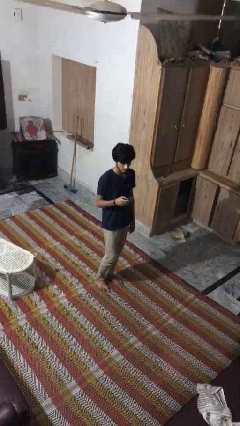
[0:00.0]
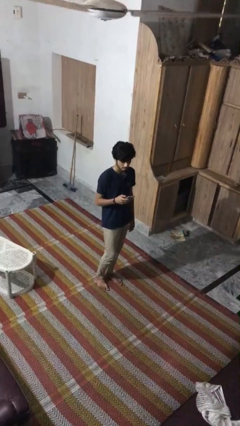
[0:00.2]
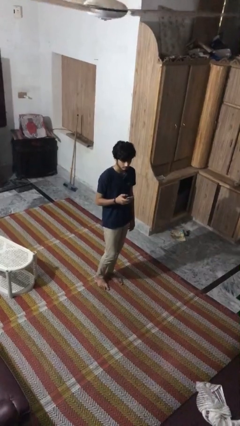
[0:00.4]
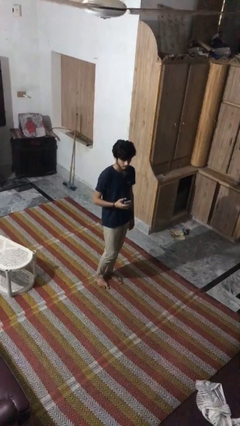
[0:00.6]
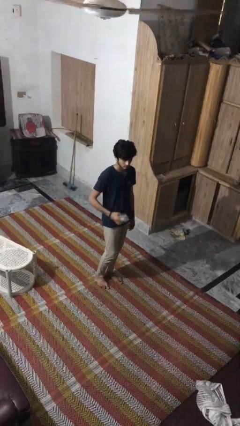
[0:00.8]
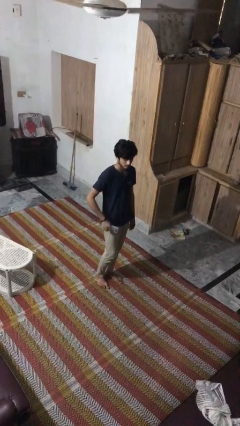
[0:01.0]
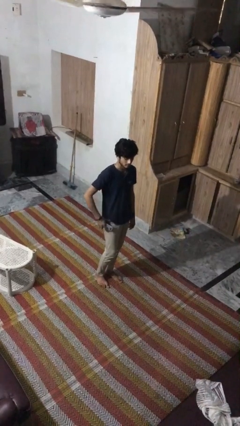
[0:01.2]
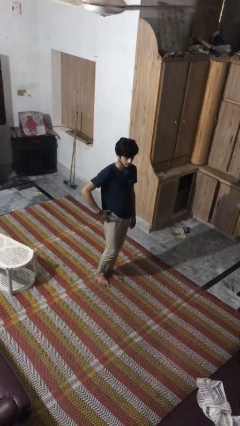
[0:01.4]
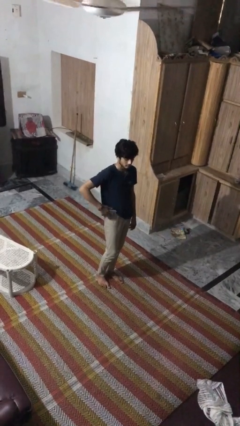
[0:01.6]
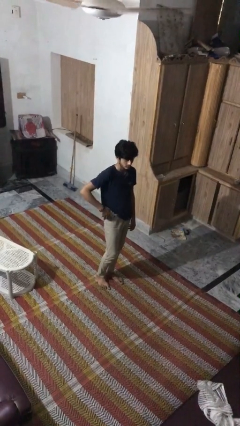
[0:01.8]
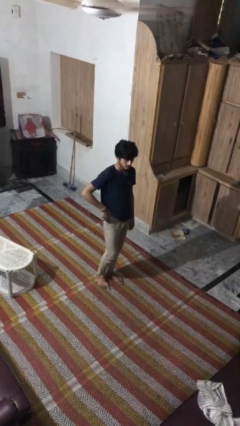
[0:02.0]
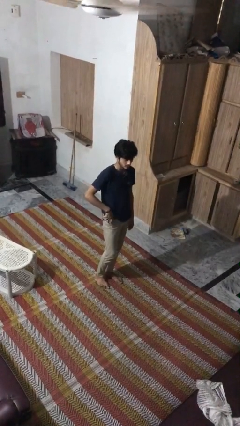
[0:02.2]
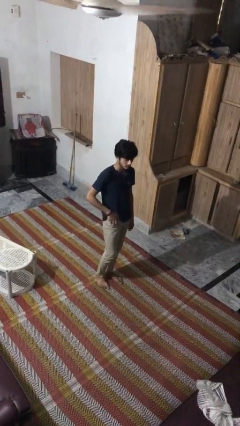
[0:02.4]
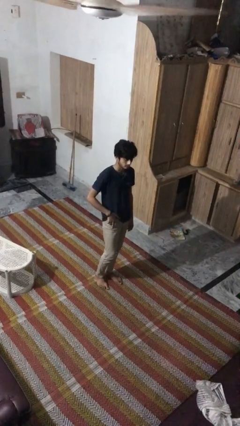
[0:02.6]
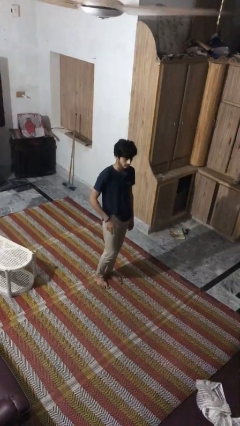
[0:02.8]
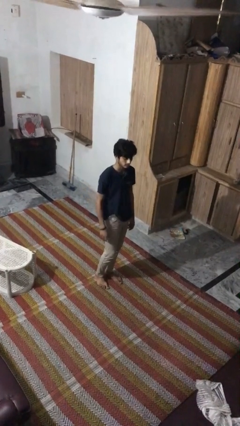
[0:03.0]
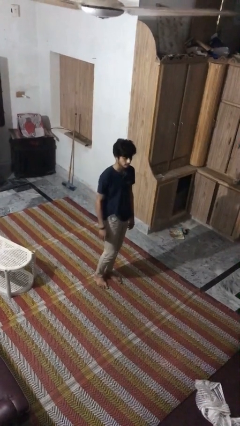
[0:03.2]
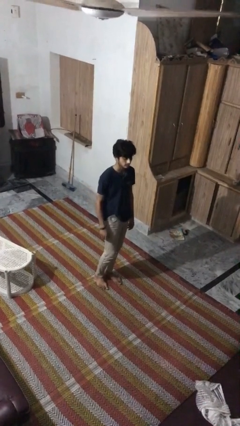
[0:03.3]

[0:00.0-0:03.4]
person puts phone into pocket

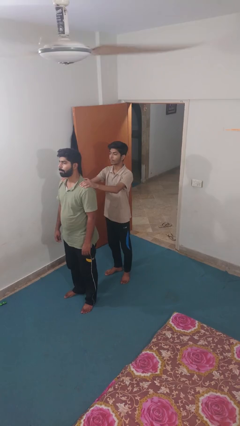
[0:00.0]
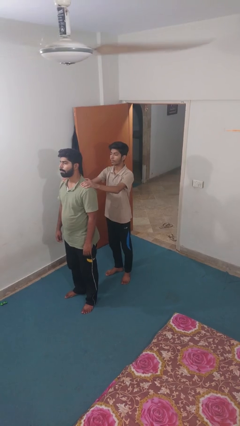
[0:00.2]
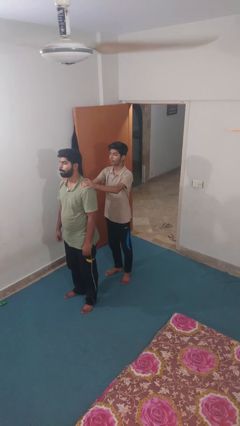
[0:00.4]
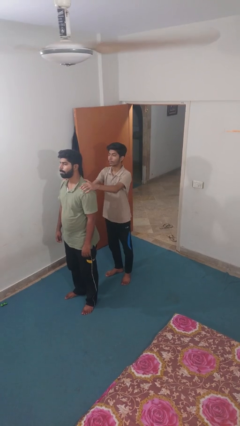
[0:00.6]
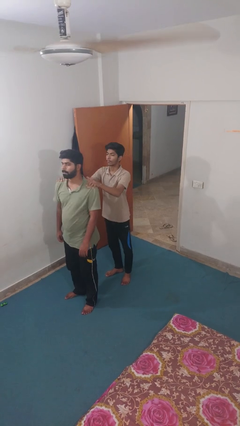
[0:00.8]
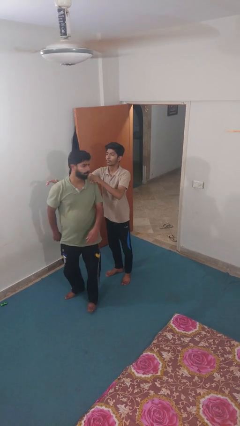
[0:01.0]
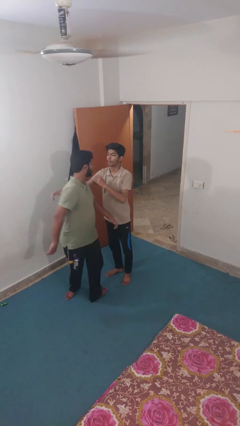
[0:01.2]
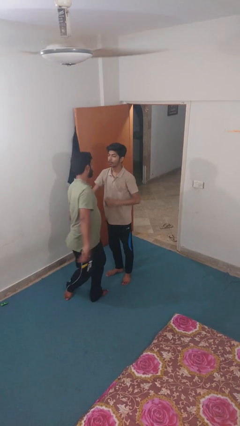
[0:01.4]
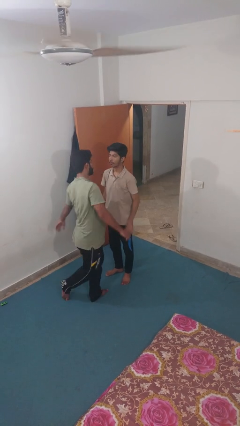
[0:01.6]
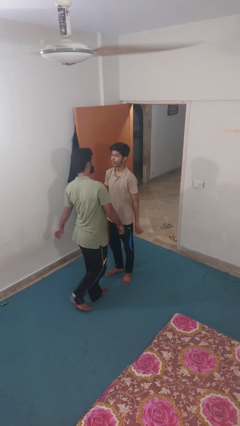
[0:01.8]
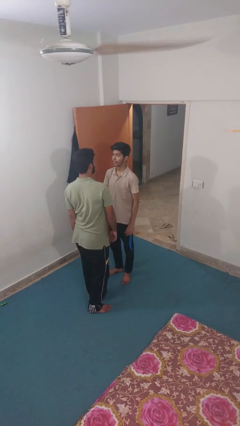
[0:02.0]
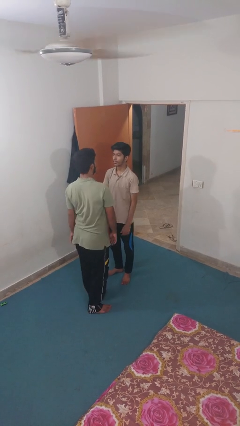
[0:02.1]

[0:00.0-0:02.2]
person spins person around

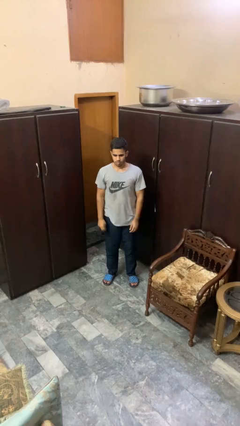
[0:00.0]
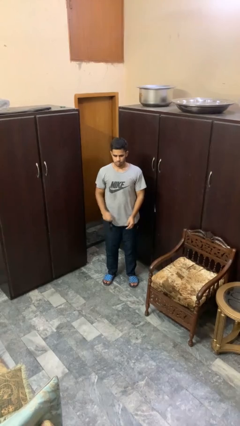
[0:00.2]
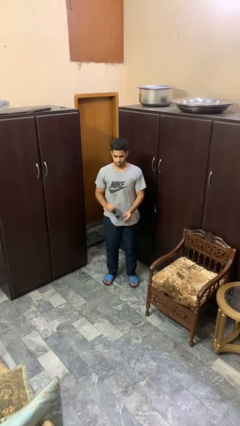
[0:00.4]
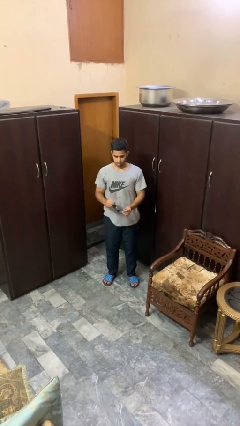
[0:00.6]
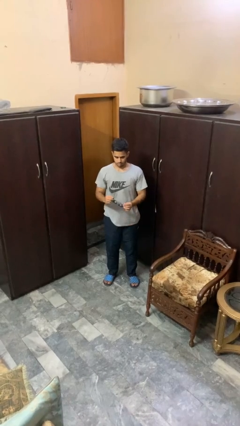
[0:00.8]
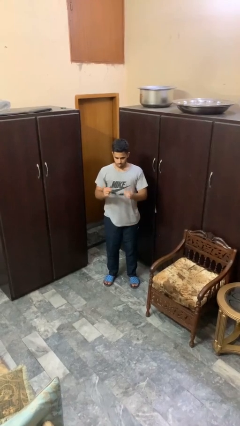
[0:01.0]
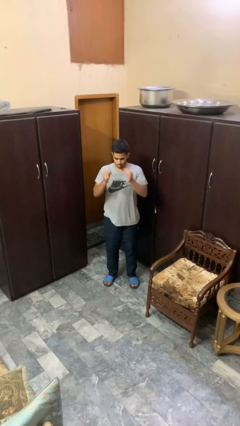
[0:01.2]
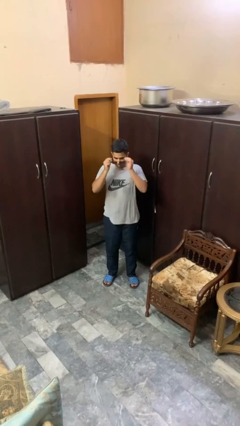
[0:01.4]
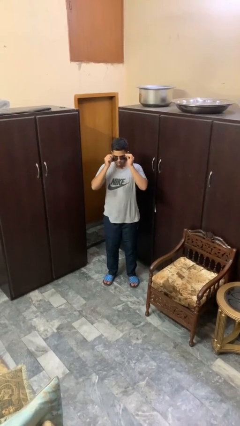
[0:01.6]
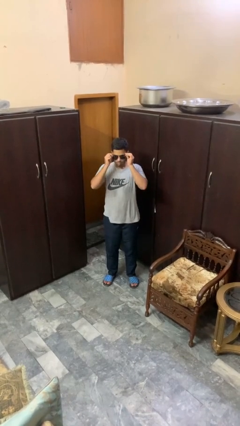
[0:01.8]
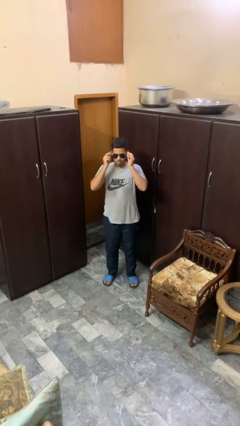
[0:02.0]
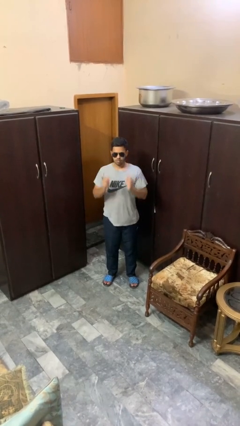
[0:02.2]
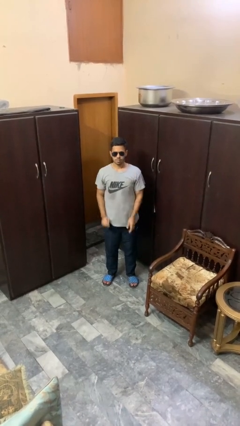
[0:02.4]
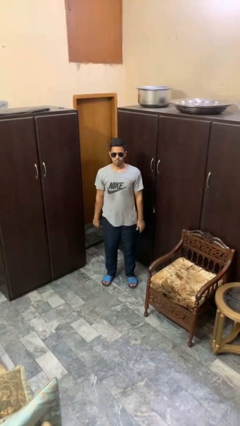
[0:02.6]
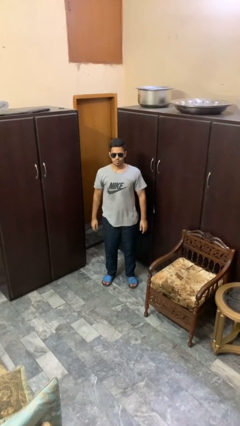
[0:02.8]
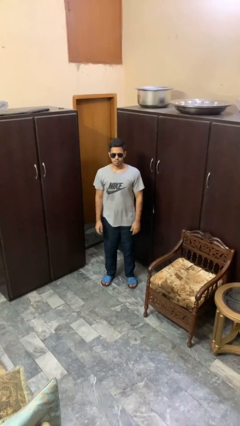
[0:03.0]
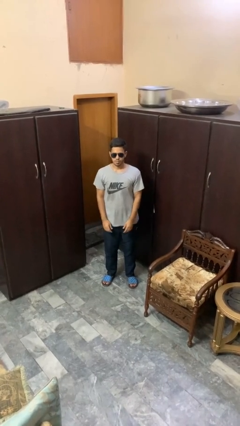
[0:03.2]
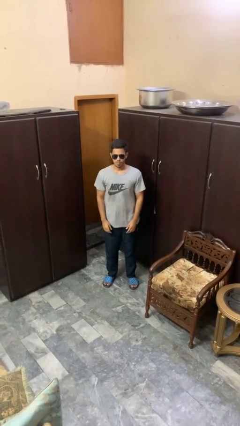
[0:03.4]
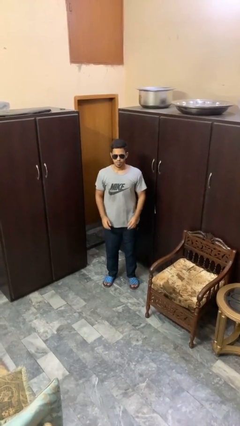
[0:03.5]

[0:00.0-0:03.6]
person puts on sunglasses

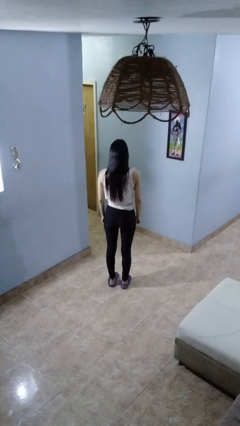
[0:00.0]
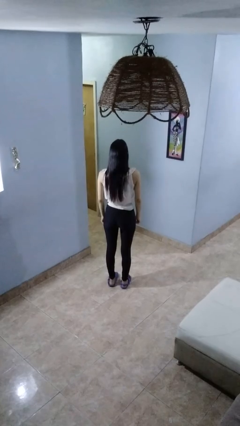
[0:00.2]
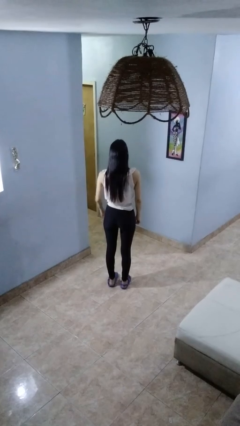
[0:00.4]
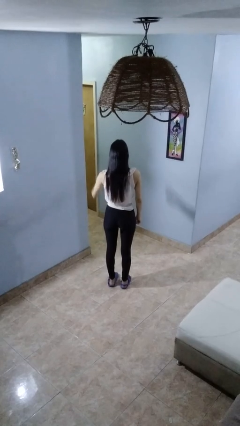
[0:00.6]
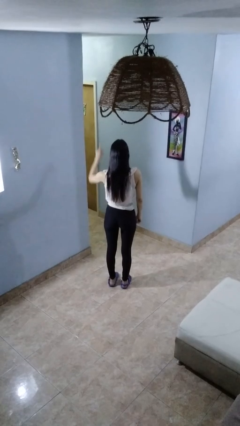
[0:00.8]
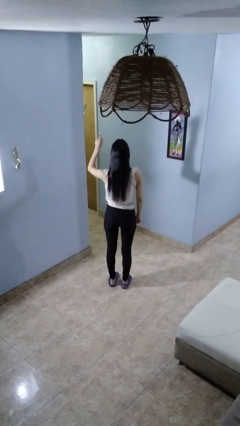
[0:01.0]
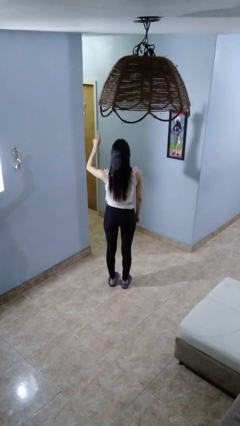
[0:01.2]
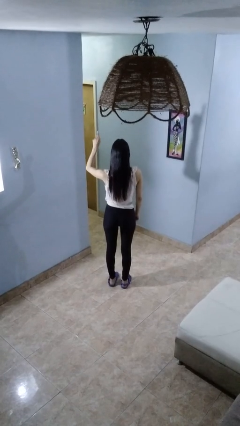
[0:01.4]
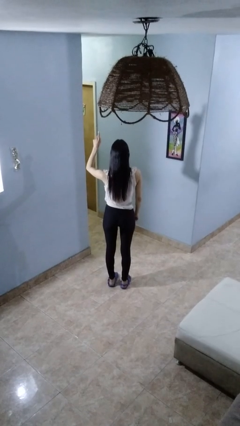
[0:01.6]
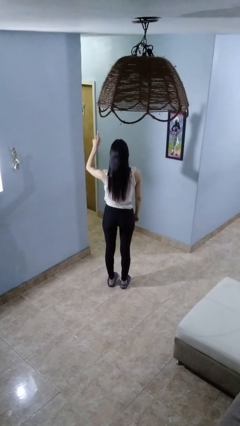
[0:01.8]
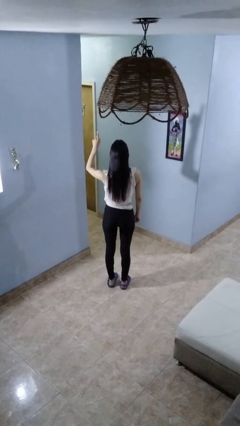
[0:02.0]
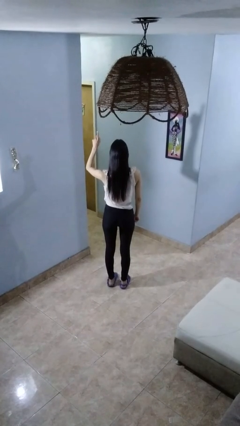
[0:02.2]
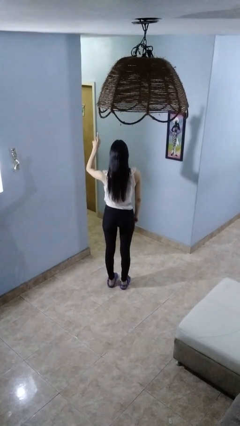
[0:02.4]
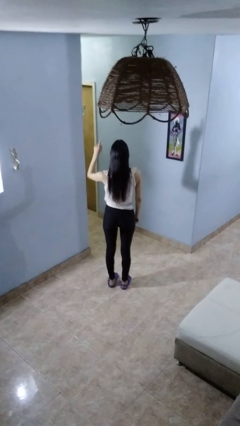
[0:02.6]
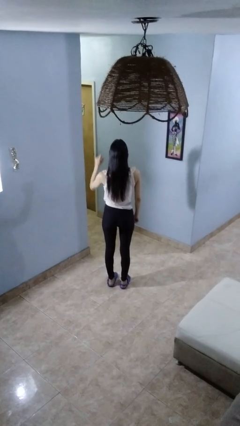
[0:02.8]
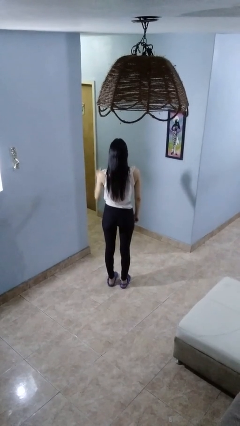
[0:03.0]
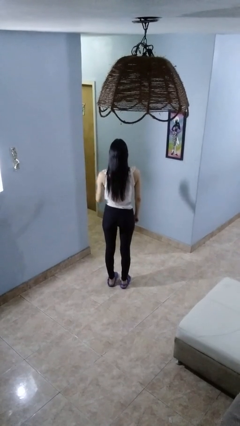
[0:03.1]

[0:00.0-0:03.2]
person gestures number one

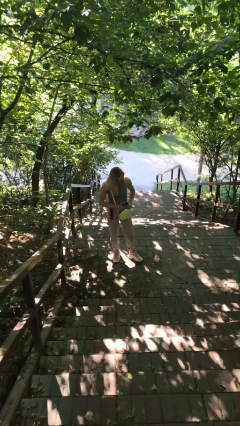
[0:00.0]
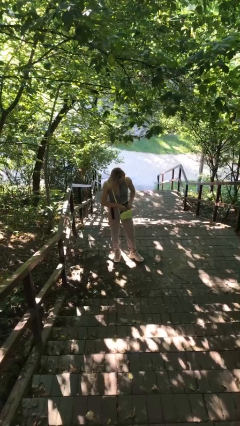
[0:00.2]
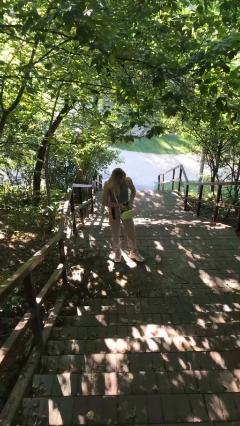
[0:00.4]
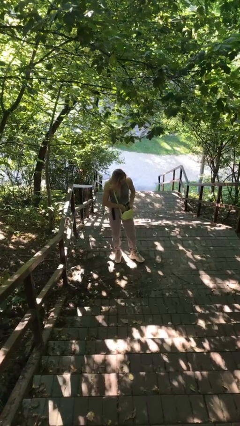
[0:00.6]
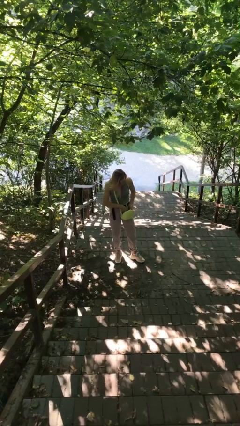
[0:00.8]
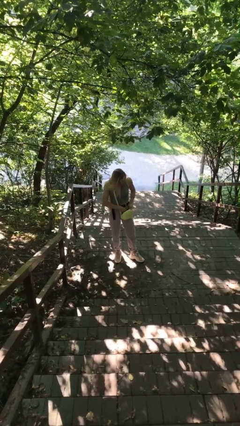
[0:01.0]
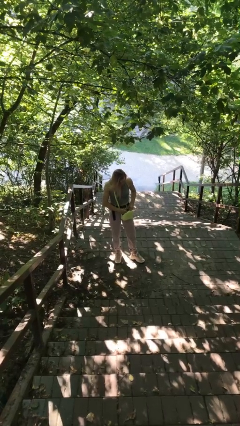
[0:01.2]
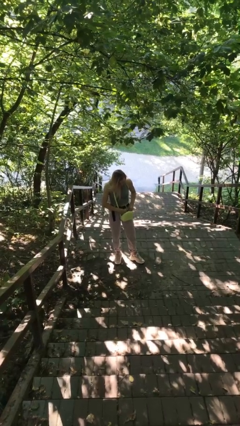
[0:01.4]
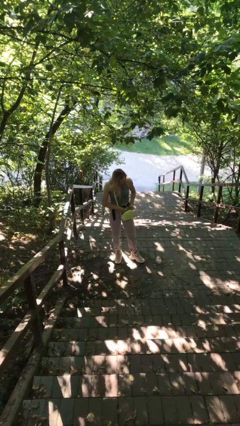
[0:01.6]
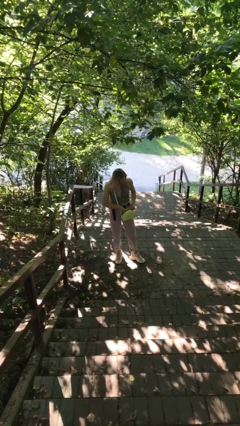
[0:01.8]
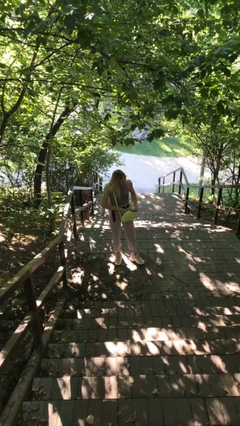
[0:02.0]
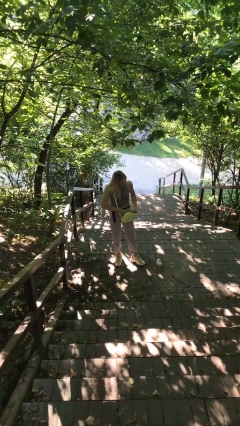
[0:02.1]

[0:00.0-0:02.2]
person searches in purse

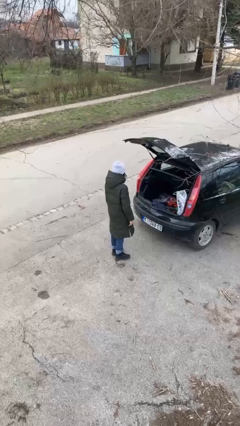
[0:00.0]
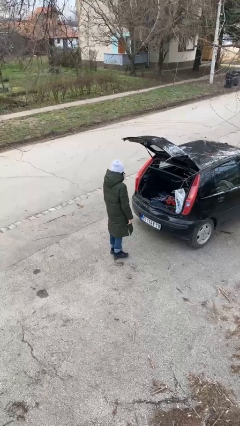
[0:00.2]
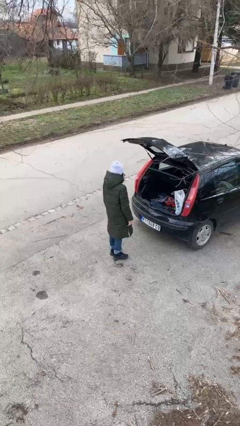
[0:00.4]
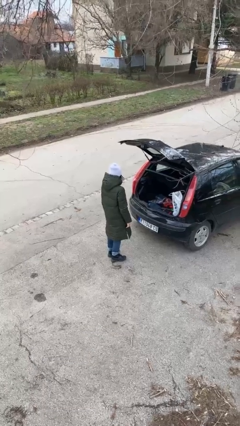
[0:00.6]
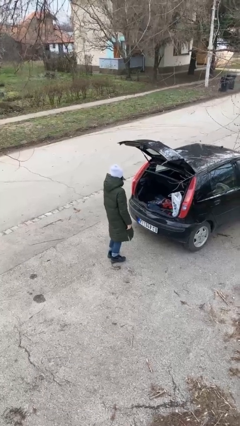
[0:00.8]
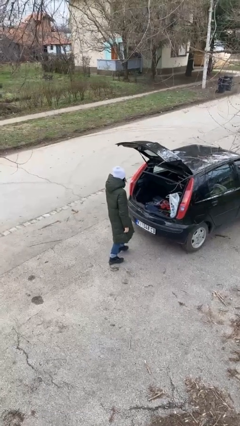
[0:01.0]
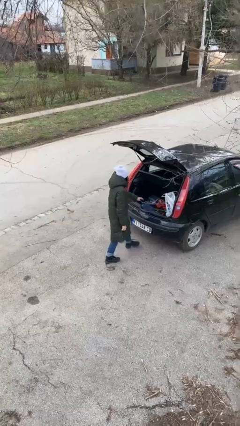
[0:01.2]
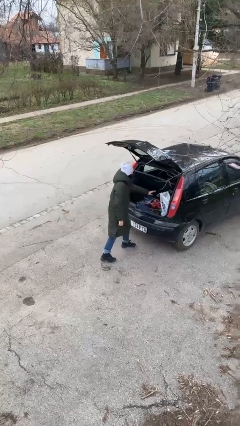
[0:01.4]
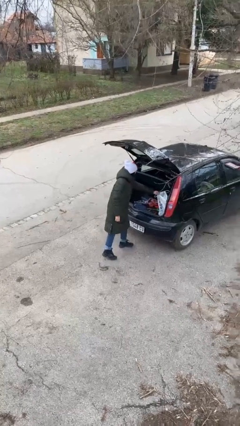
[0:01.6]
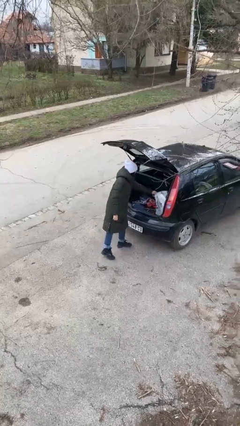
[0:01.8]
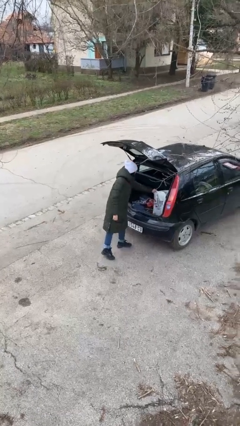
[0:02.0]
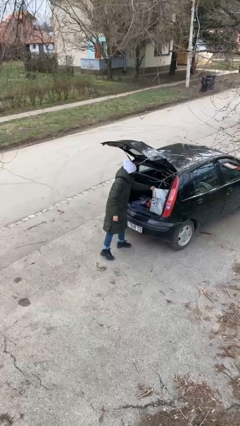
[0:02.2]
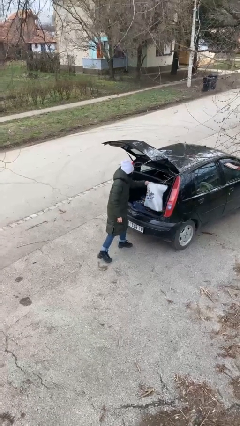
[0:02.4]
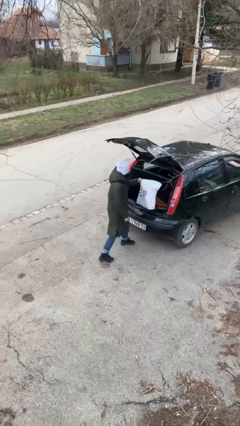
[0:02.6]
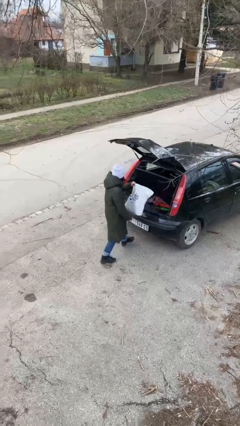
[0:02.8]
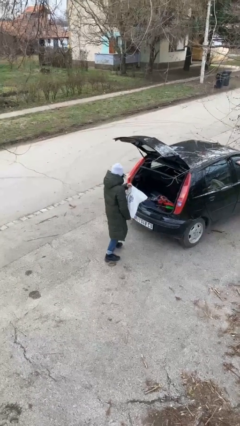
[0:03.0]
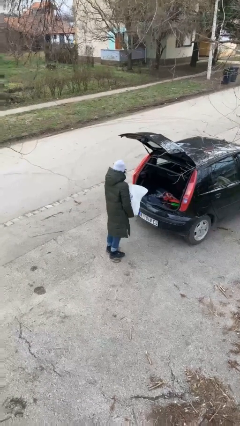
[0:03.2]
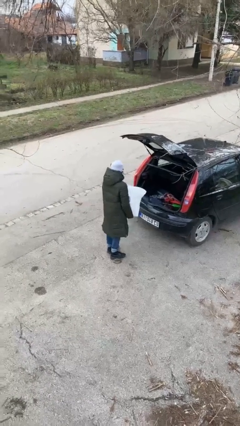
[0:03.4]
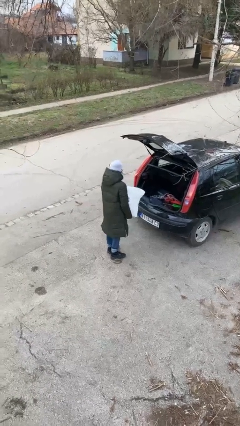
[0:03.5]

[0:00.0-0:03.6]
person unloads car
